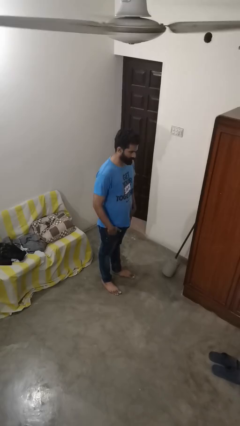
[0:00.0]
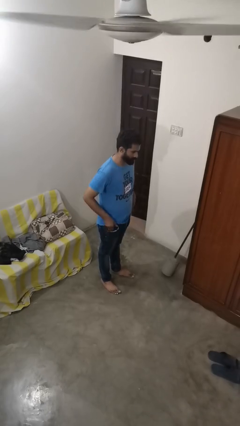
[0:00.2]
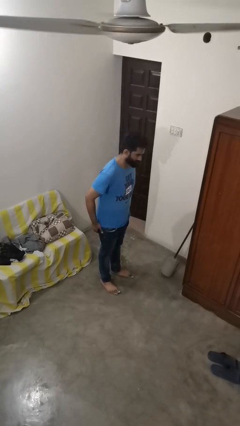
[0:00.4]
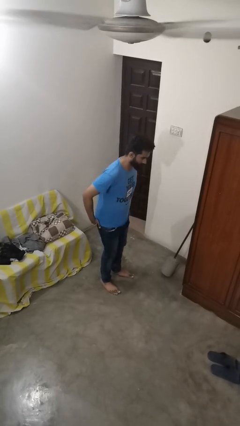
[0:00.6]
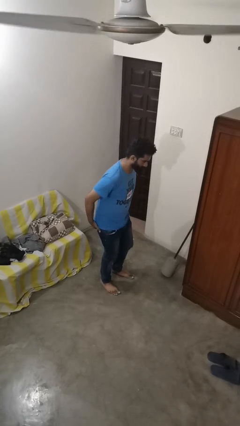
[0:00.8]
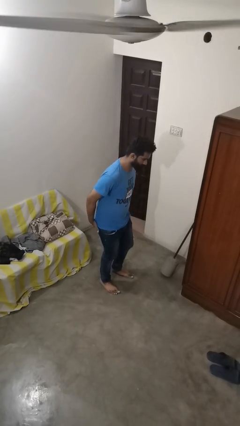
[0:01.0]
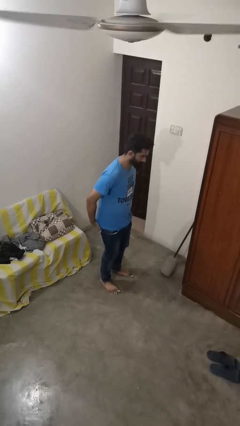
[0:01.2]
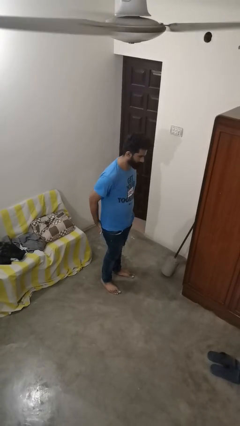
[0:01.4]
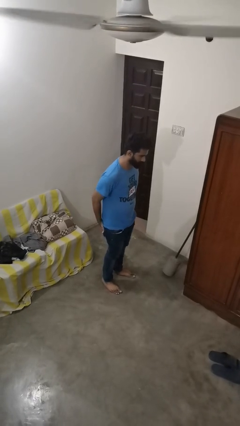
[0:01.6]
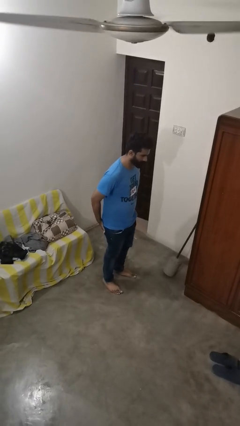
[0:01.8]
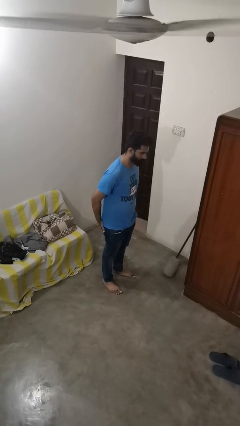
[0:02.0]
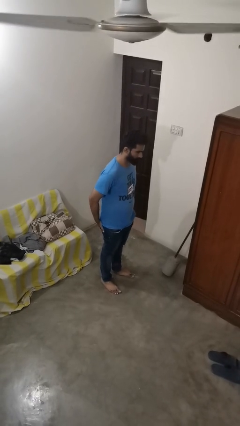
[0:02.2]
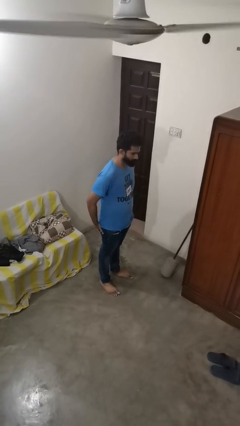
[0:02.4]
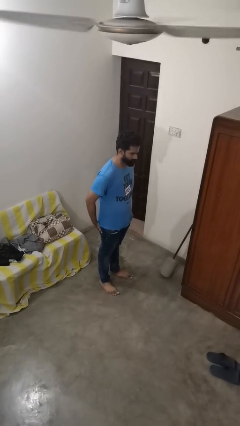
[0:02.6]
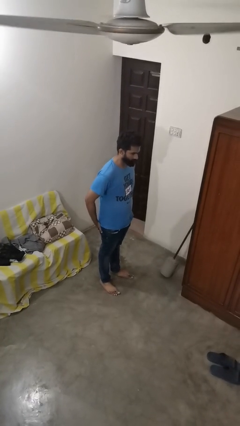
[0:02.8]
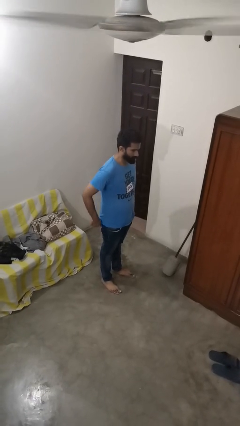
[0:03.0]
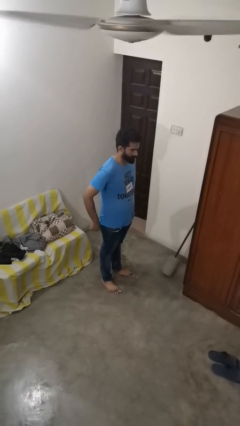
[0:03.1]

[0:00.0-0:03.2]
person puts hands in back pockets

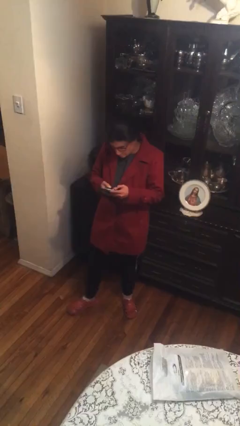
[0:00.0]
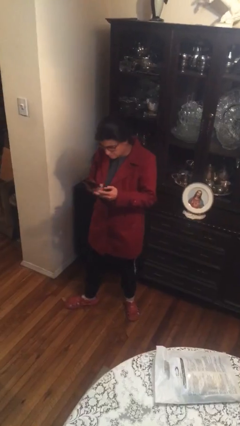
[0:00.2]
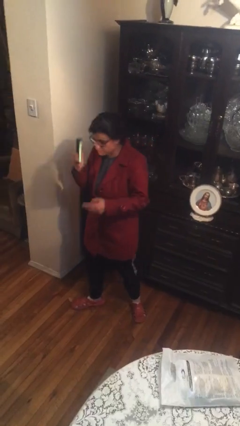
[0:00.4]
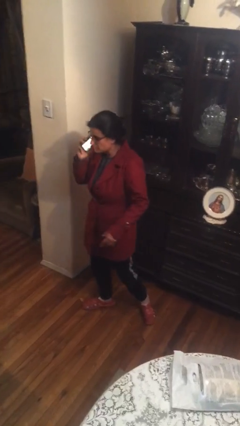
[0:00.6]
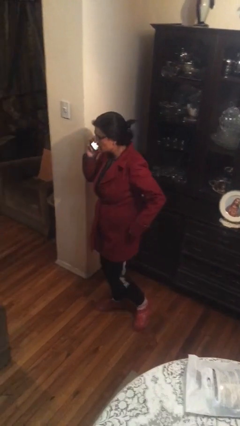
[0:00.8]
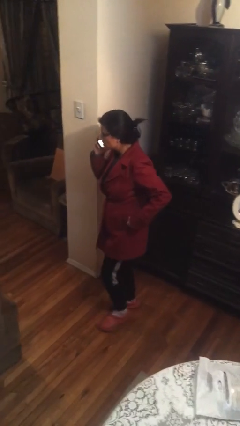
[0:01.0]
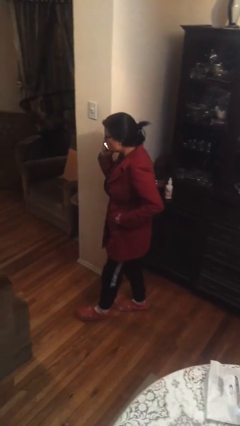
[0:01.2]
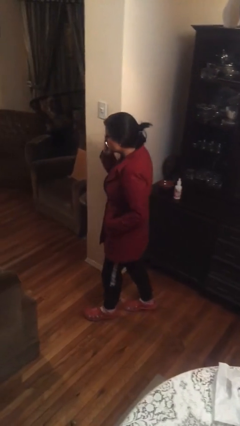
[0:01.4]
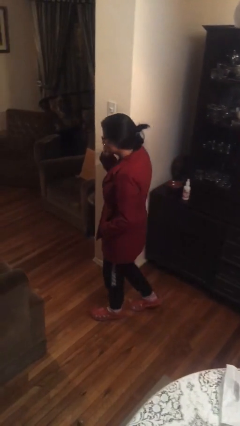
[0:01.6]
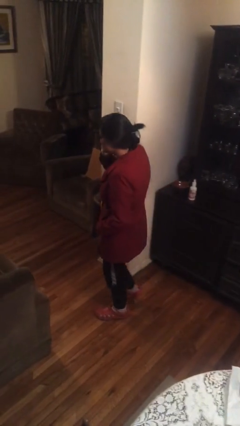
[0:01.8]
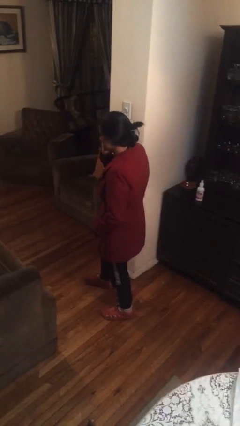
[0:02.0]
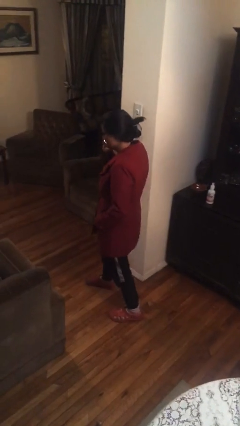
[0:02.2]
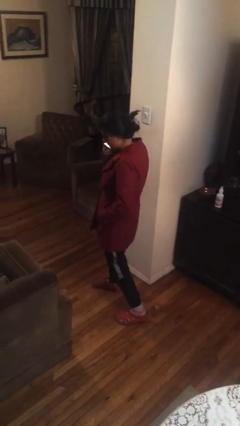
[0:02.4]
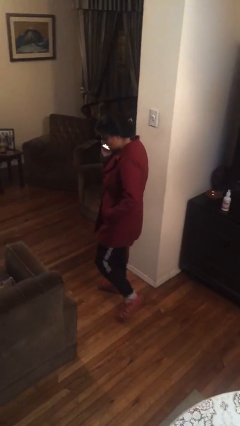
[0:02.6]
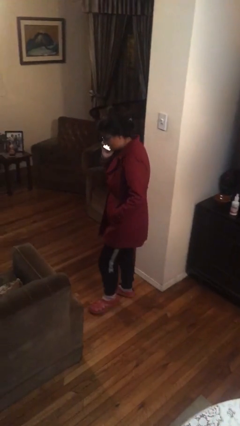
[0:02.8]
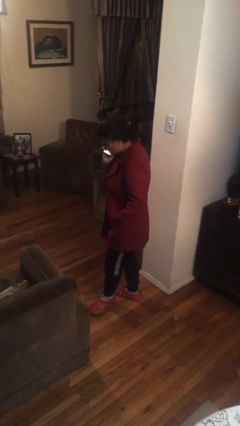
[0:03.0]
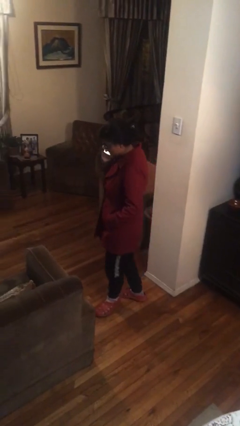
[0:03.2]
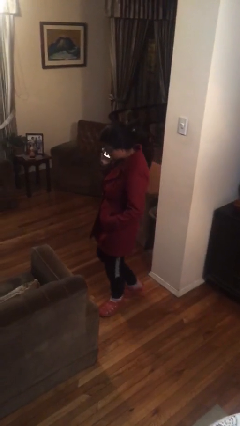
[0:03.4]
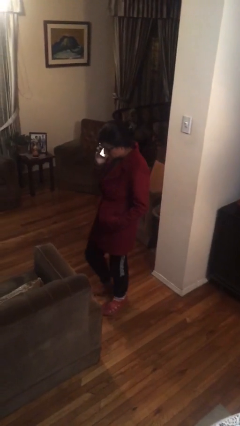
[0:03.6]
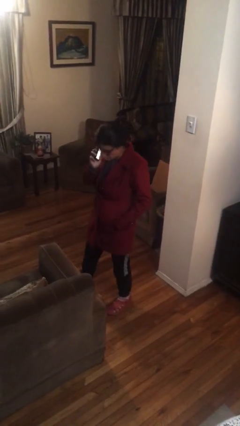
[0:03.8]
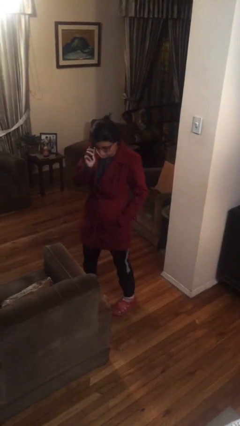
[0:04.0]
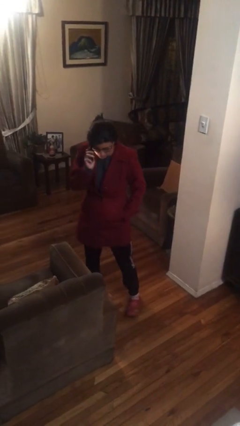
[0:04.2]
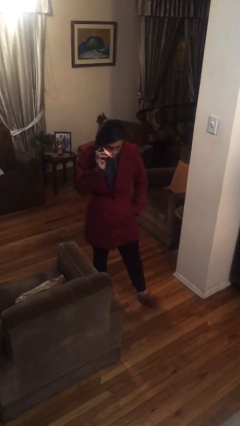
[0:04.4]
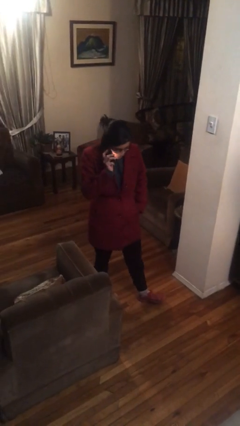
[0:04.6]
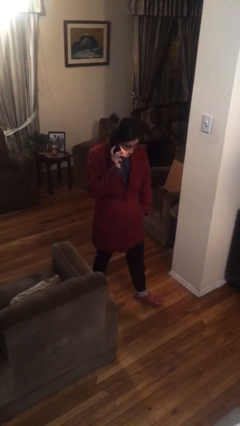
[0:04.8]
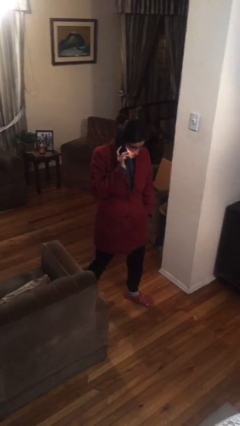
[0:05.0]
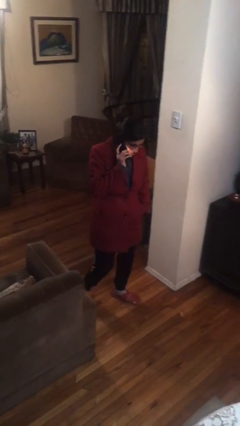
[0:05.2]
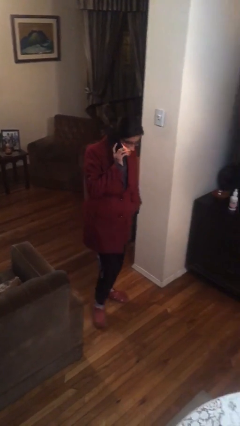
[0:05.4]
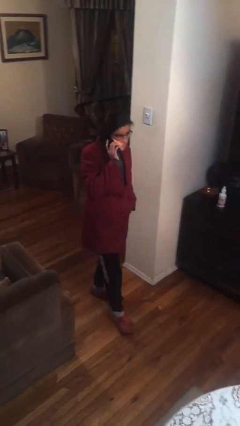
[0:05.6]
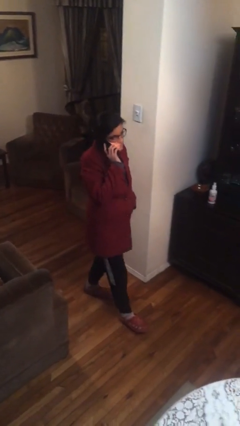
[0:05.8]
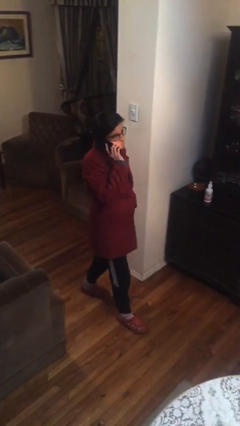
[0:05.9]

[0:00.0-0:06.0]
person talks on phone

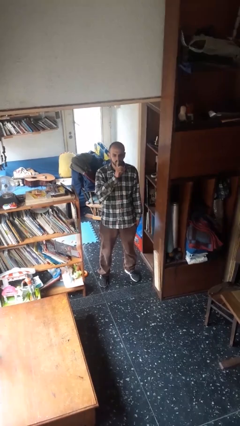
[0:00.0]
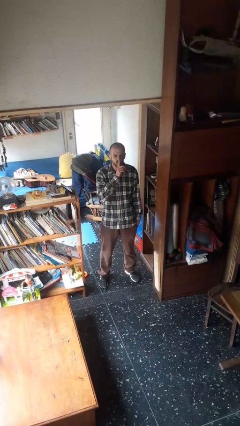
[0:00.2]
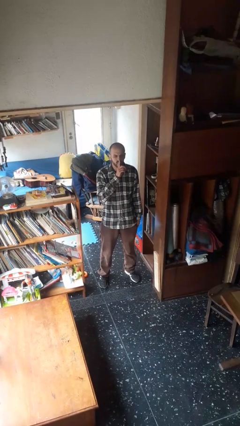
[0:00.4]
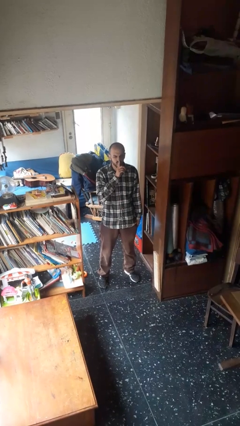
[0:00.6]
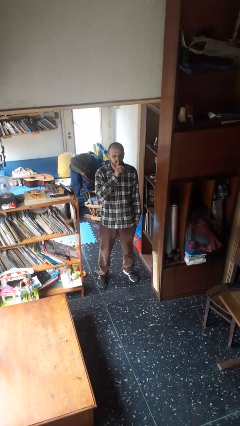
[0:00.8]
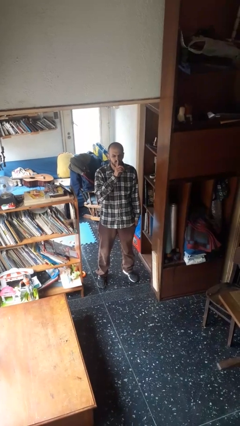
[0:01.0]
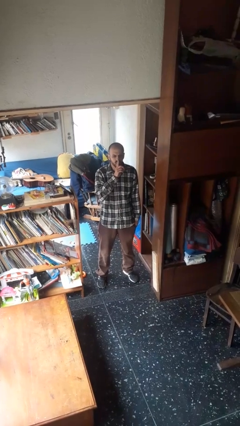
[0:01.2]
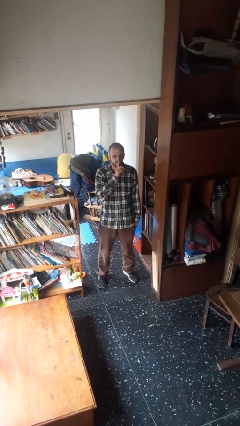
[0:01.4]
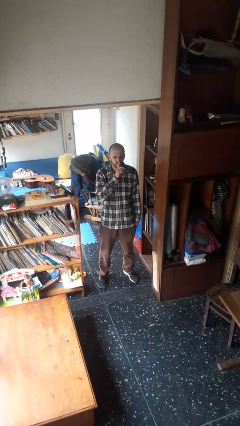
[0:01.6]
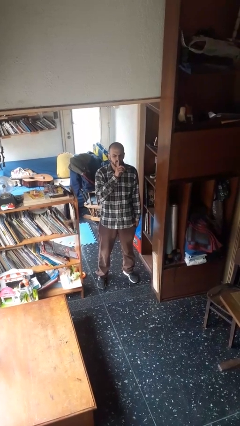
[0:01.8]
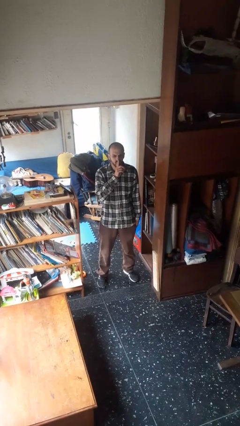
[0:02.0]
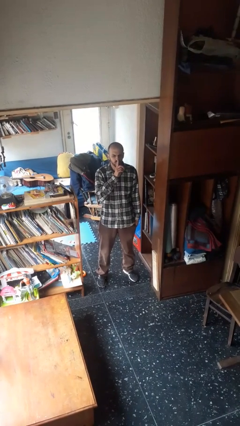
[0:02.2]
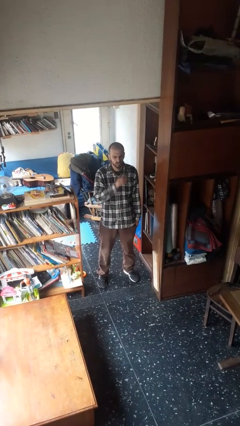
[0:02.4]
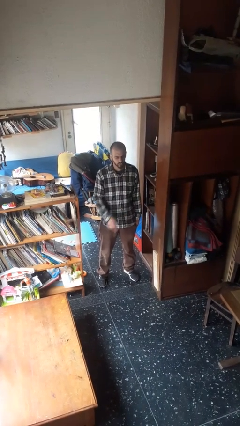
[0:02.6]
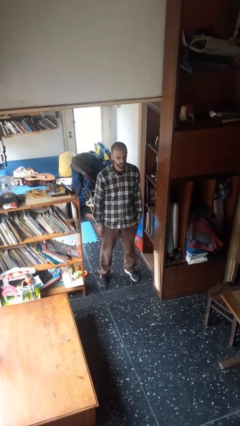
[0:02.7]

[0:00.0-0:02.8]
person gestures be quiet

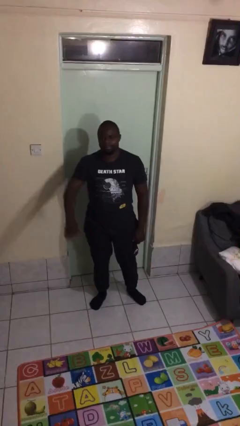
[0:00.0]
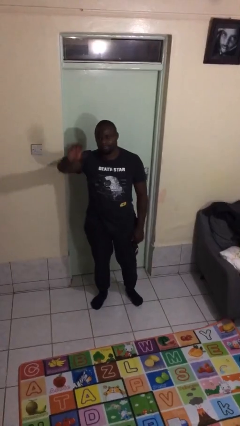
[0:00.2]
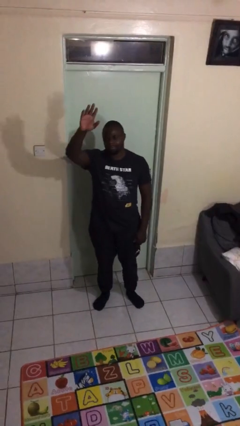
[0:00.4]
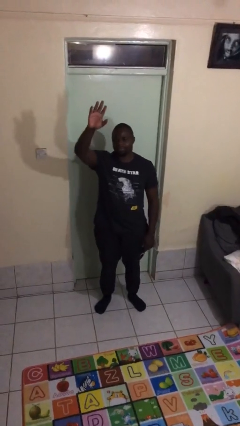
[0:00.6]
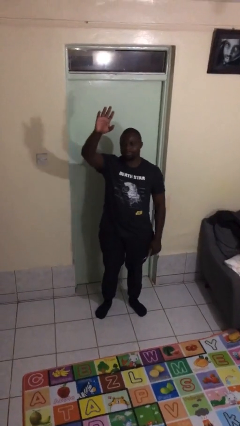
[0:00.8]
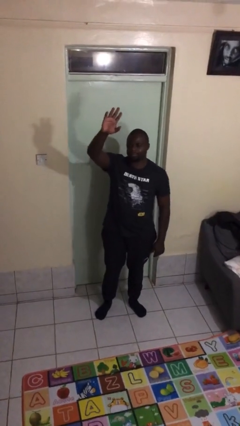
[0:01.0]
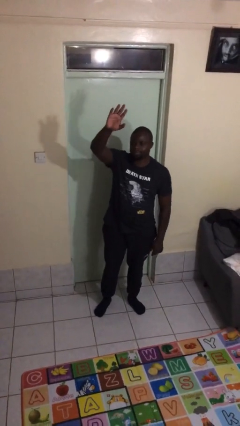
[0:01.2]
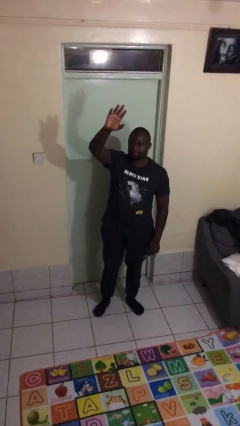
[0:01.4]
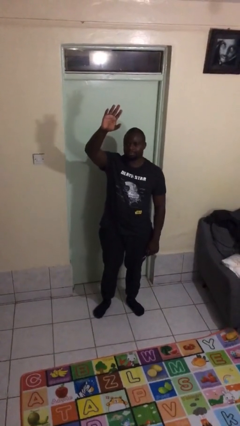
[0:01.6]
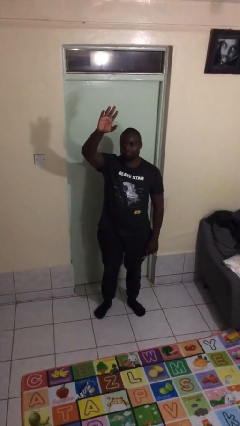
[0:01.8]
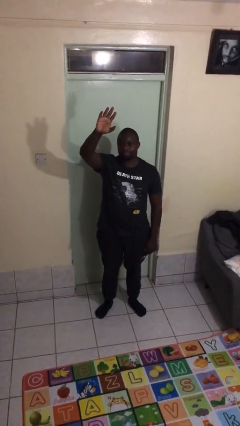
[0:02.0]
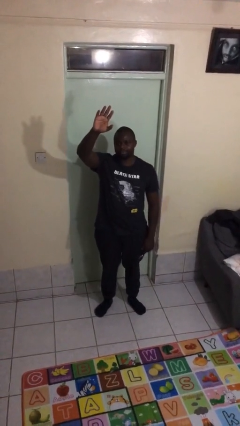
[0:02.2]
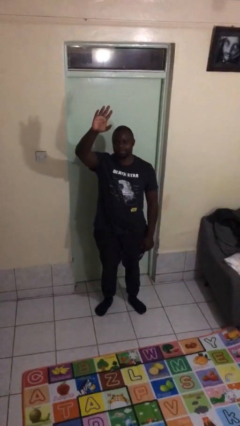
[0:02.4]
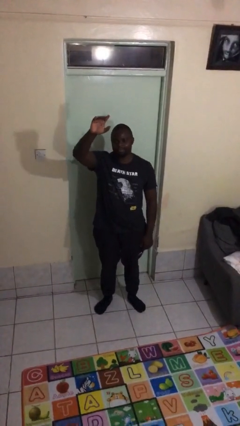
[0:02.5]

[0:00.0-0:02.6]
person gestures raise hand

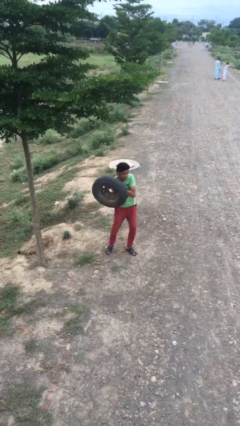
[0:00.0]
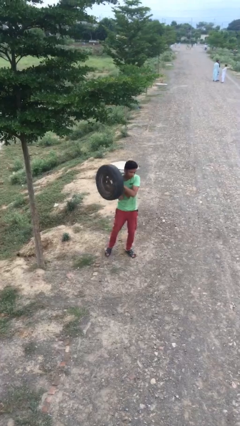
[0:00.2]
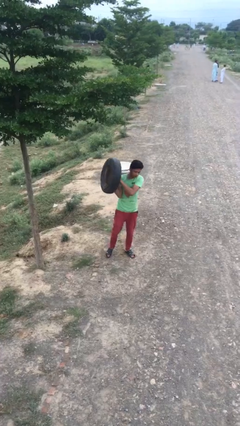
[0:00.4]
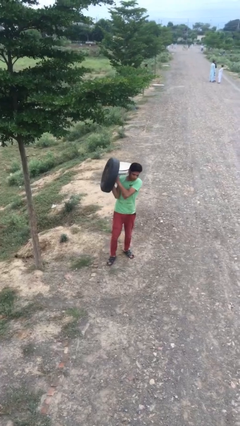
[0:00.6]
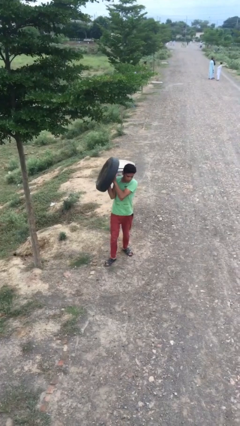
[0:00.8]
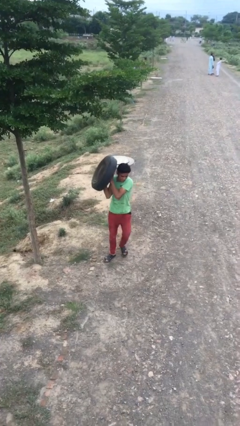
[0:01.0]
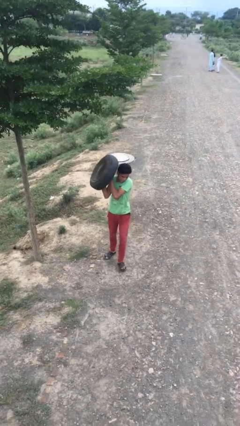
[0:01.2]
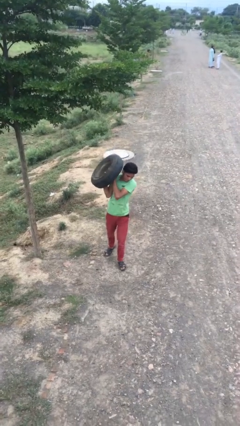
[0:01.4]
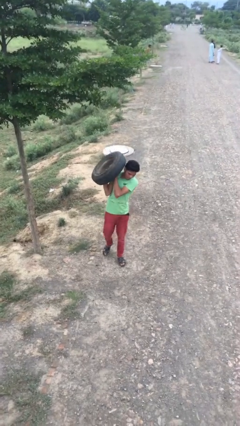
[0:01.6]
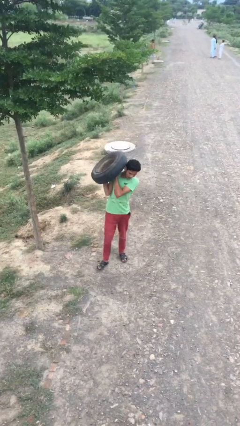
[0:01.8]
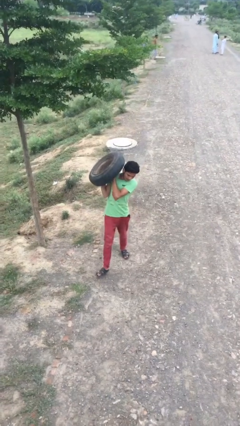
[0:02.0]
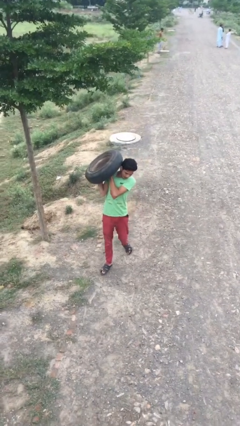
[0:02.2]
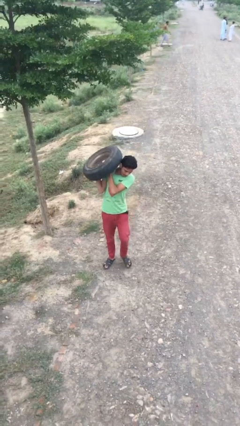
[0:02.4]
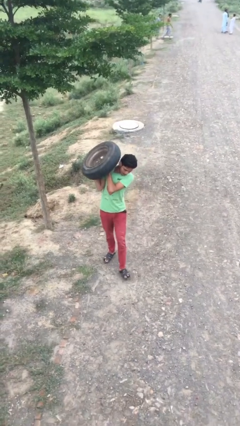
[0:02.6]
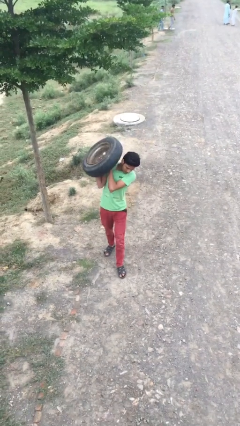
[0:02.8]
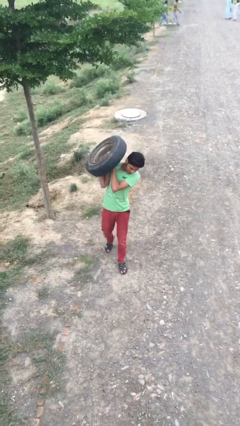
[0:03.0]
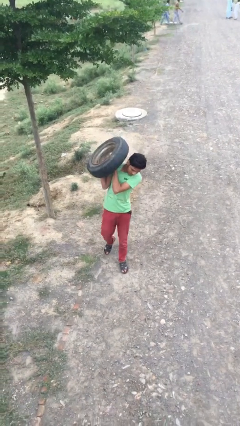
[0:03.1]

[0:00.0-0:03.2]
person carries heavy object
